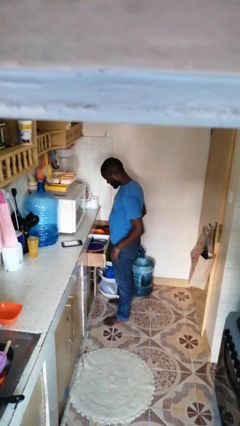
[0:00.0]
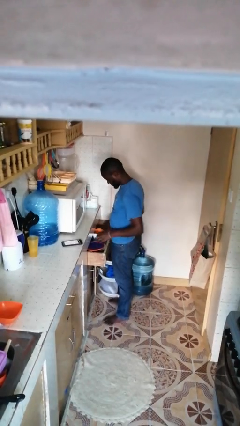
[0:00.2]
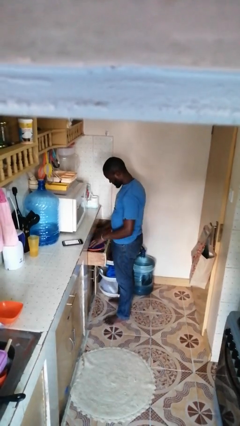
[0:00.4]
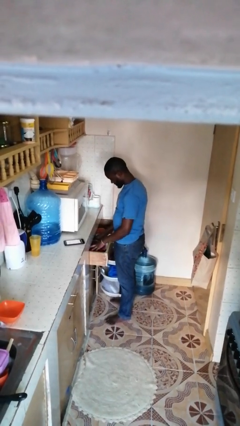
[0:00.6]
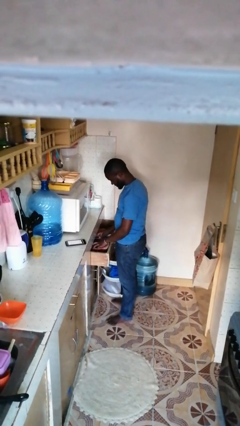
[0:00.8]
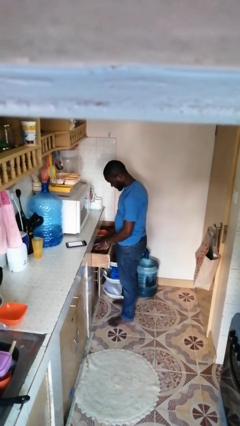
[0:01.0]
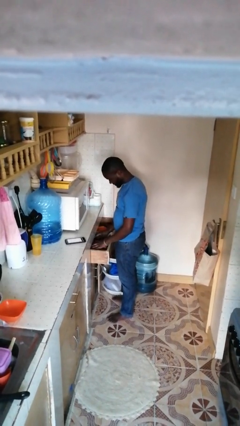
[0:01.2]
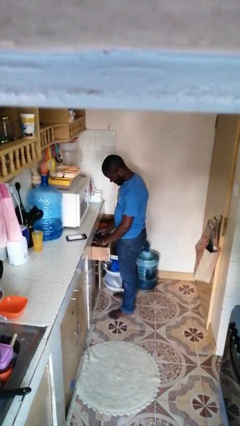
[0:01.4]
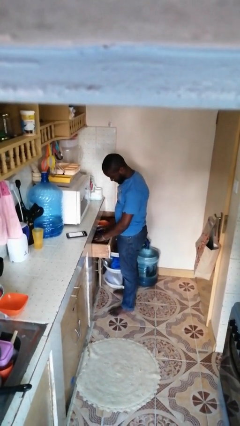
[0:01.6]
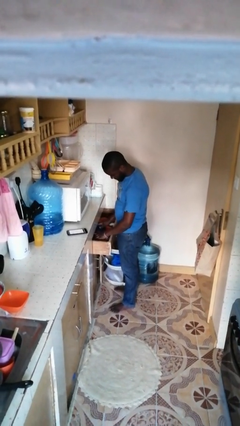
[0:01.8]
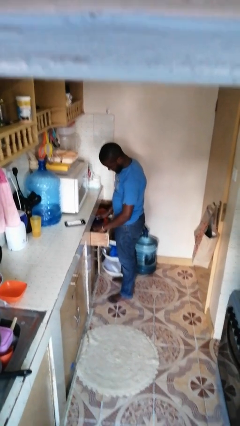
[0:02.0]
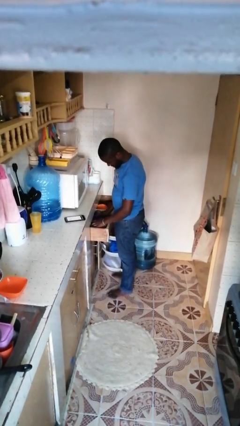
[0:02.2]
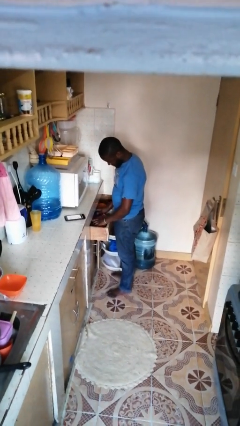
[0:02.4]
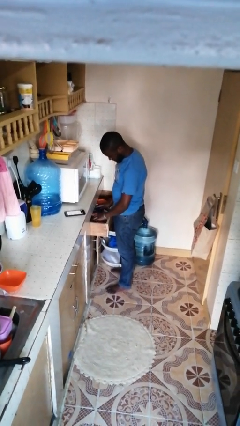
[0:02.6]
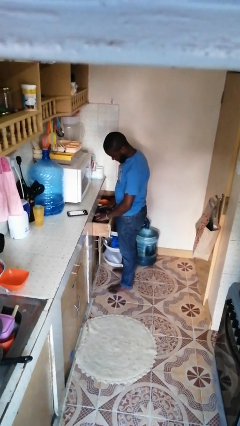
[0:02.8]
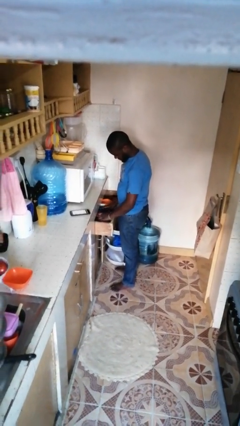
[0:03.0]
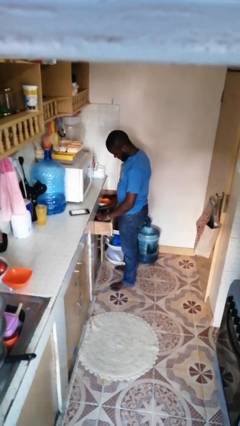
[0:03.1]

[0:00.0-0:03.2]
person searches in kitchen drawer

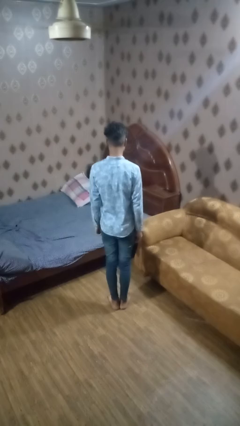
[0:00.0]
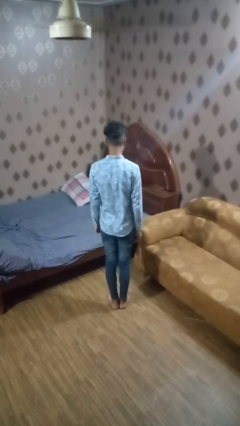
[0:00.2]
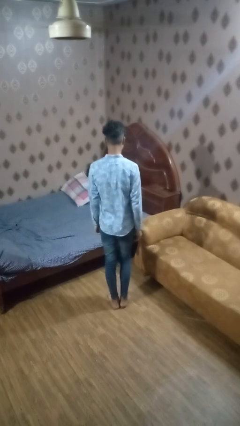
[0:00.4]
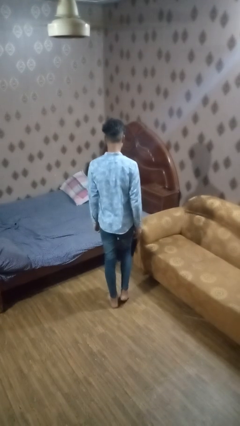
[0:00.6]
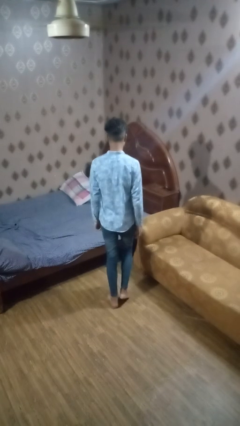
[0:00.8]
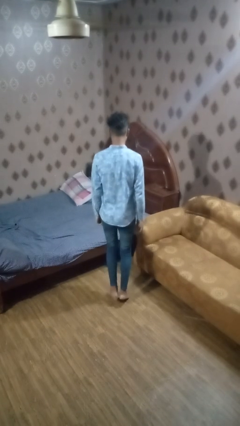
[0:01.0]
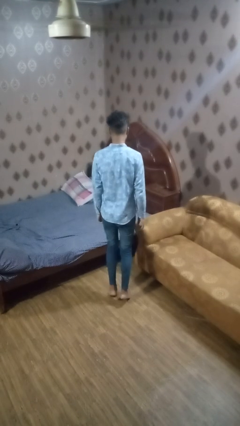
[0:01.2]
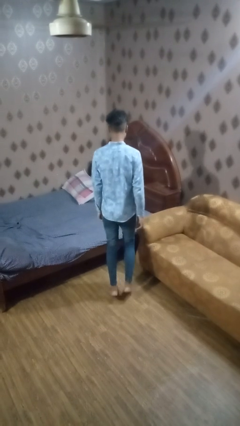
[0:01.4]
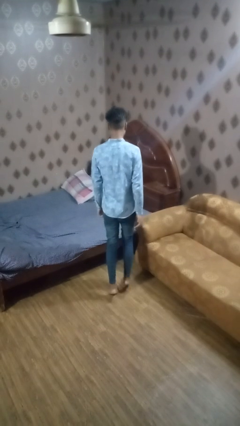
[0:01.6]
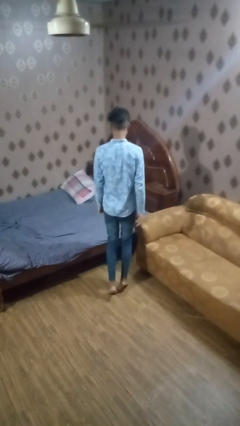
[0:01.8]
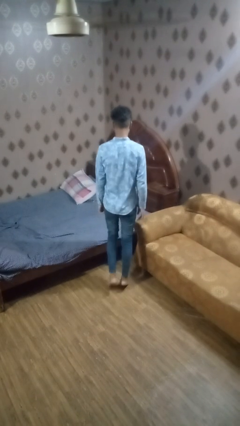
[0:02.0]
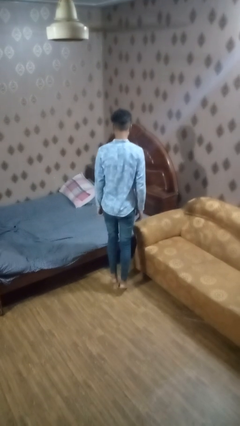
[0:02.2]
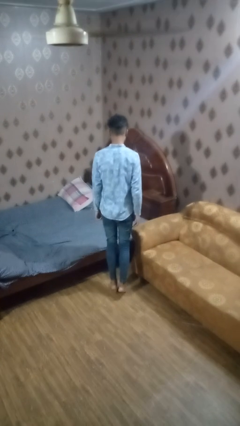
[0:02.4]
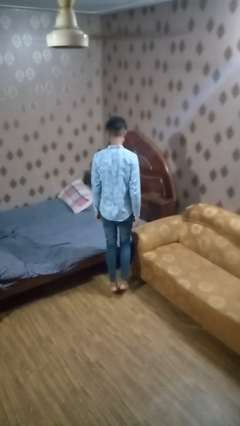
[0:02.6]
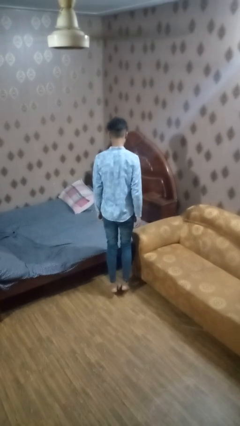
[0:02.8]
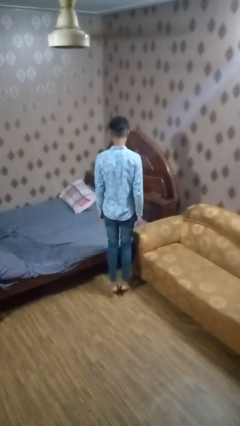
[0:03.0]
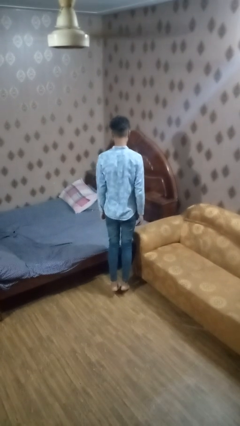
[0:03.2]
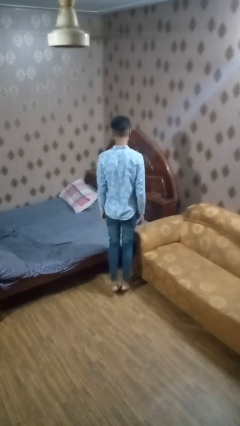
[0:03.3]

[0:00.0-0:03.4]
person walks tiptoe

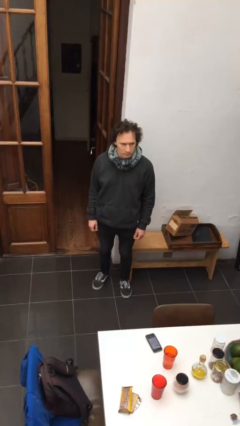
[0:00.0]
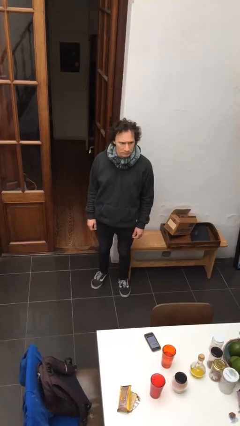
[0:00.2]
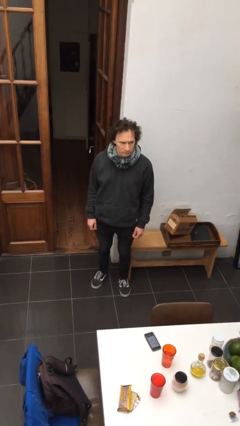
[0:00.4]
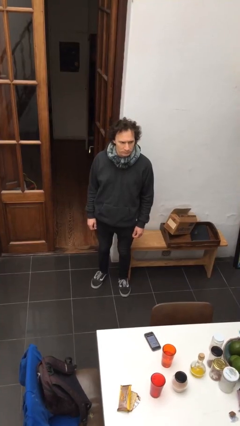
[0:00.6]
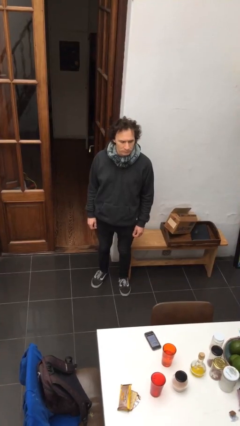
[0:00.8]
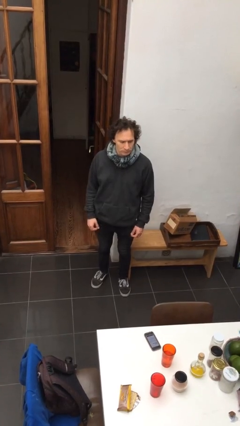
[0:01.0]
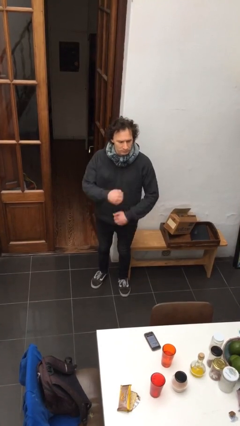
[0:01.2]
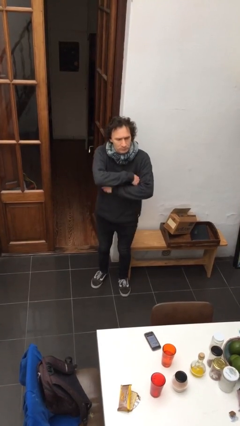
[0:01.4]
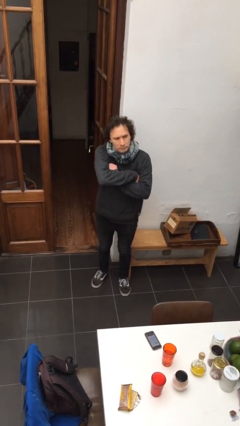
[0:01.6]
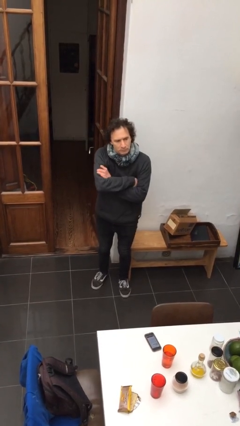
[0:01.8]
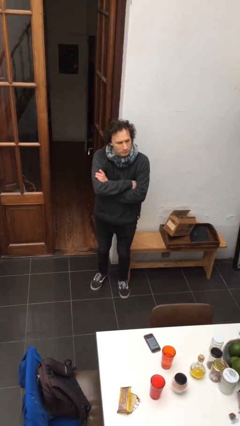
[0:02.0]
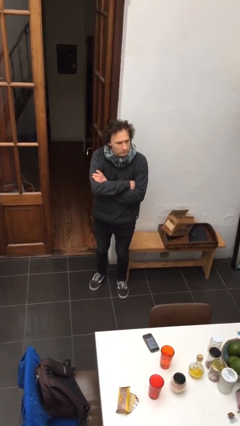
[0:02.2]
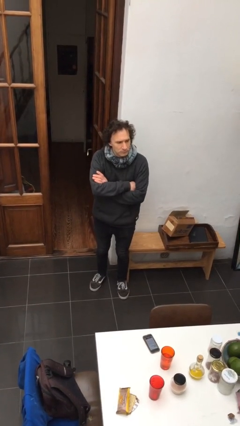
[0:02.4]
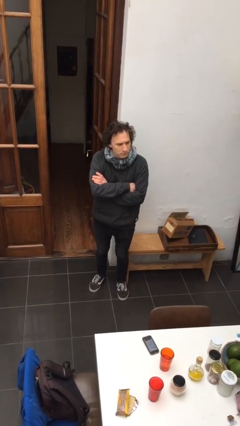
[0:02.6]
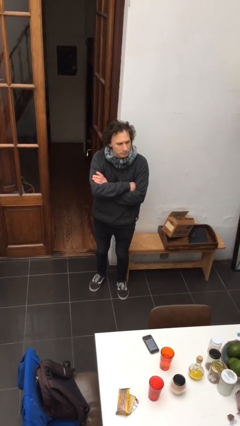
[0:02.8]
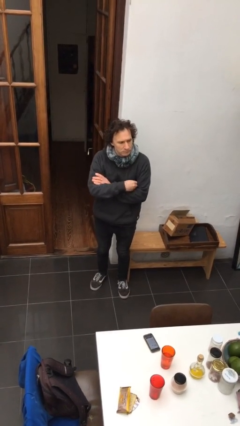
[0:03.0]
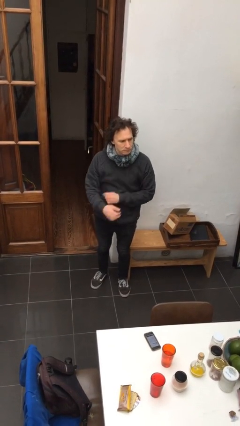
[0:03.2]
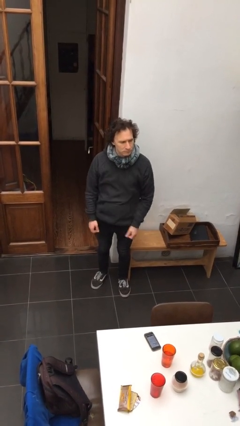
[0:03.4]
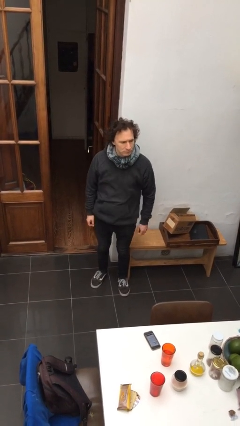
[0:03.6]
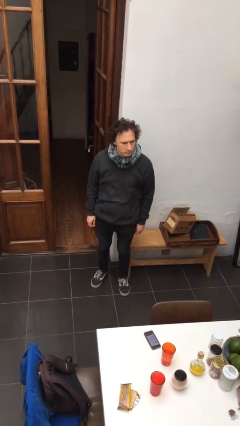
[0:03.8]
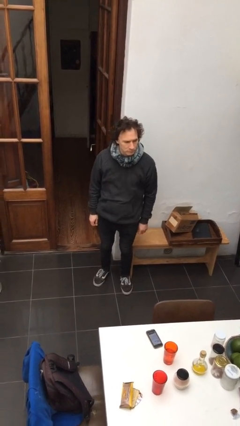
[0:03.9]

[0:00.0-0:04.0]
person crosses arms

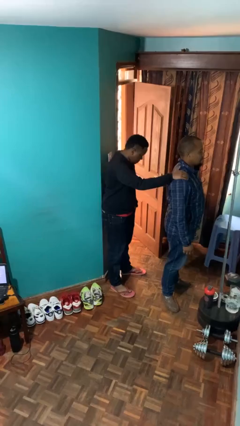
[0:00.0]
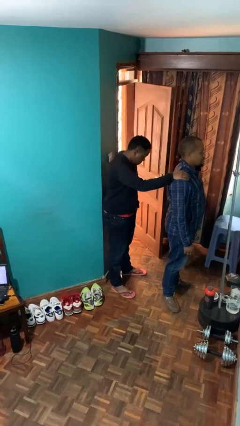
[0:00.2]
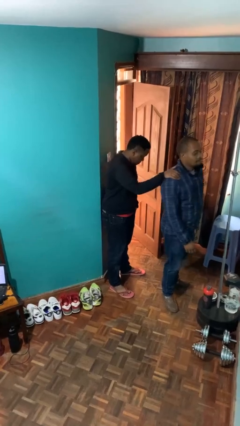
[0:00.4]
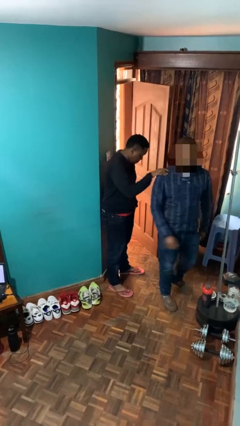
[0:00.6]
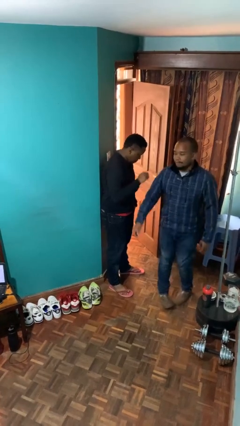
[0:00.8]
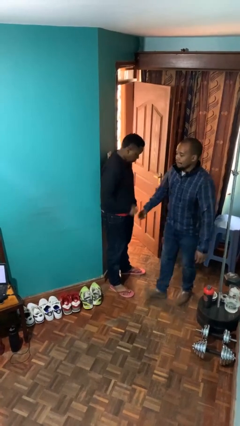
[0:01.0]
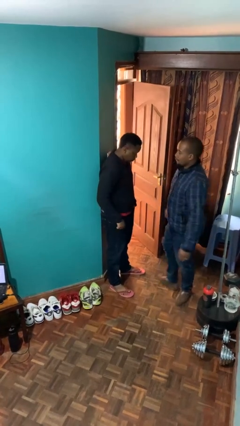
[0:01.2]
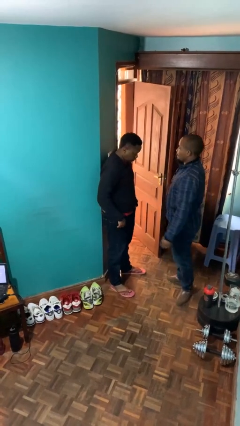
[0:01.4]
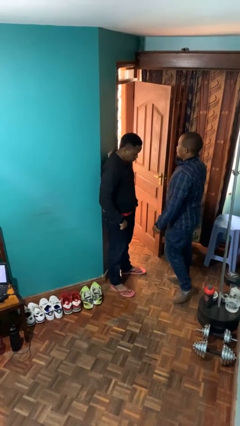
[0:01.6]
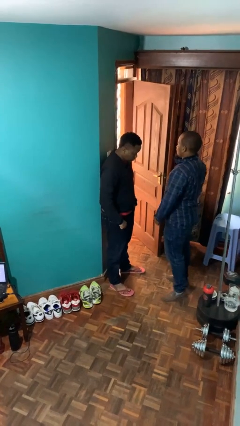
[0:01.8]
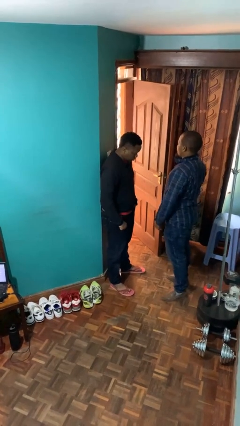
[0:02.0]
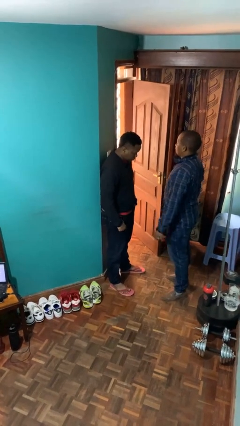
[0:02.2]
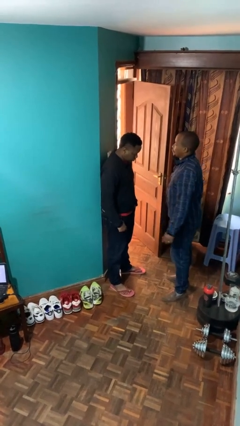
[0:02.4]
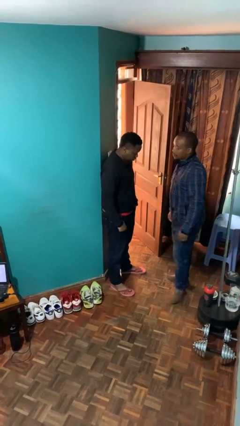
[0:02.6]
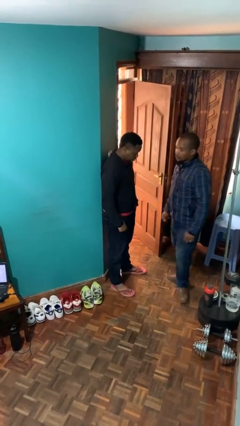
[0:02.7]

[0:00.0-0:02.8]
person spins person around

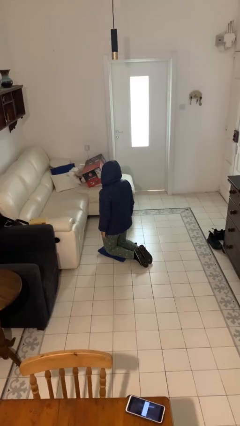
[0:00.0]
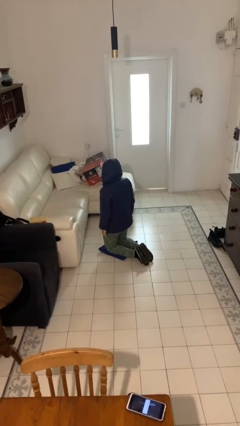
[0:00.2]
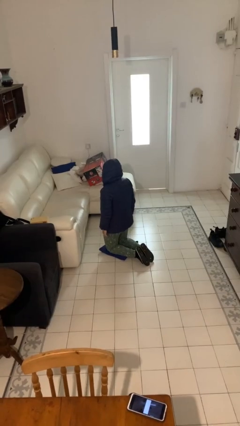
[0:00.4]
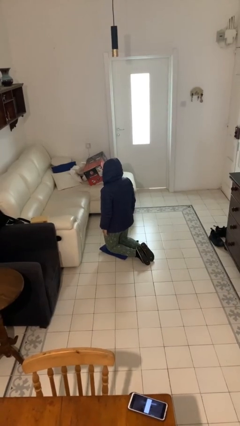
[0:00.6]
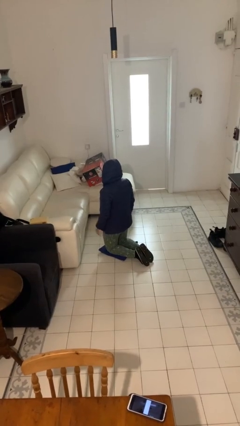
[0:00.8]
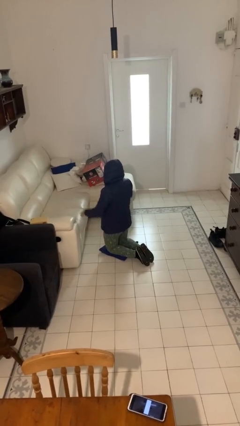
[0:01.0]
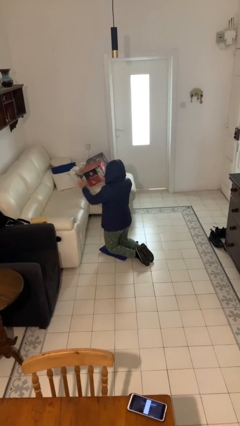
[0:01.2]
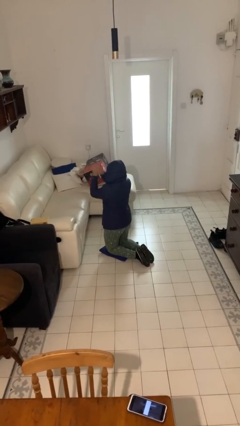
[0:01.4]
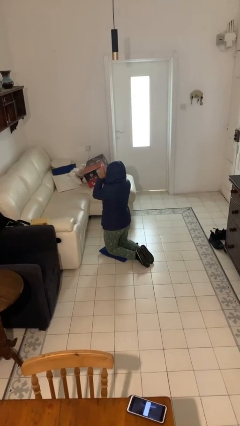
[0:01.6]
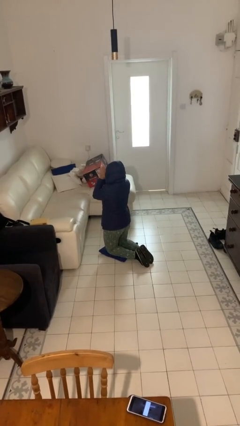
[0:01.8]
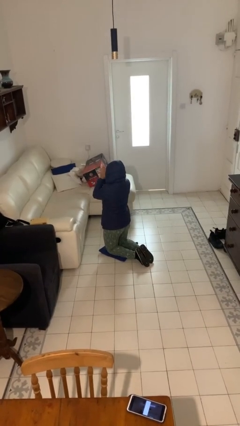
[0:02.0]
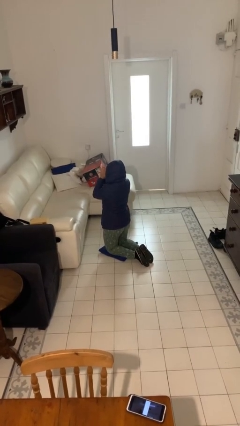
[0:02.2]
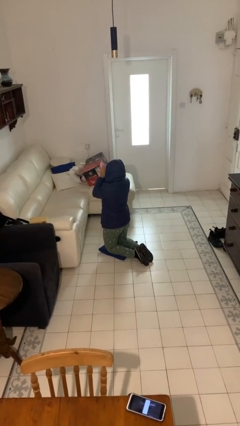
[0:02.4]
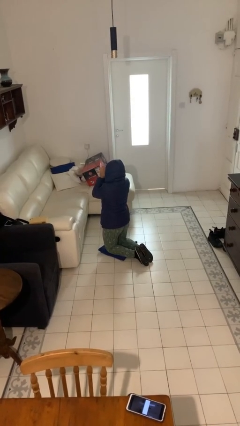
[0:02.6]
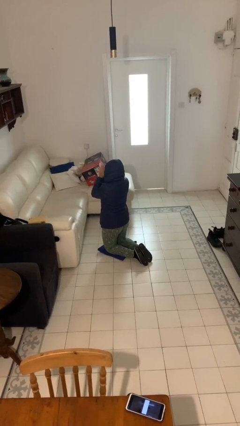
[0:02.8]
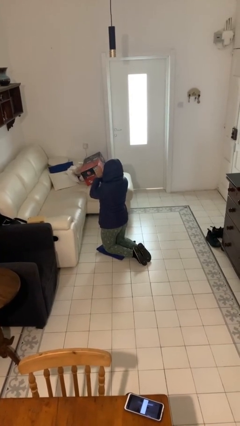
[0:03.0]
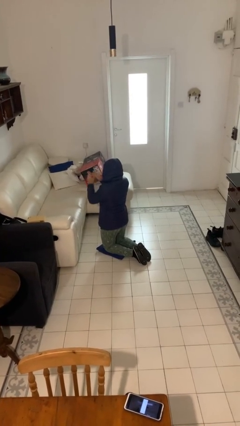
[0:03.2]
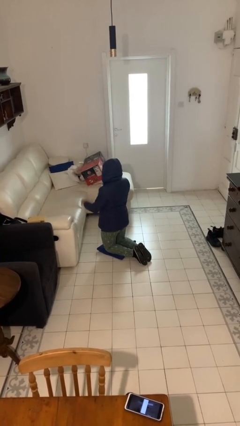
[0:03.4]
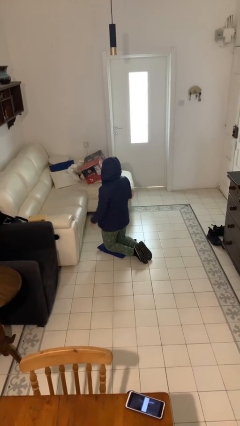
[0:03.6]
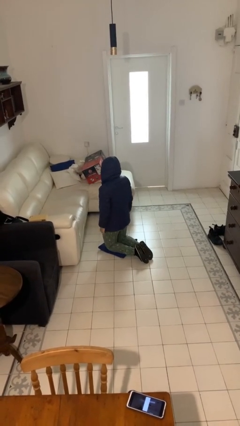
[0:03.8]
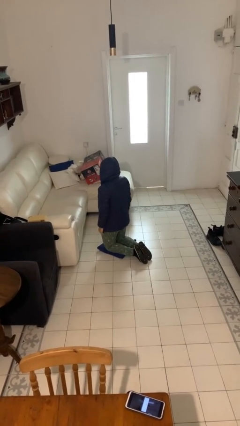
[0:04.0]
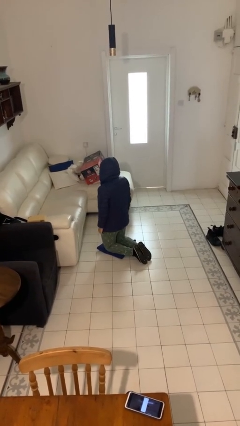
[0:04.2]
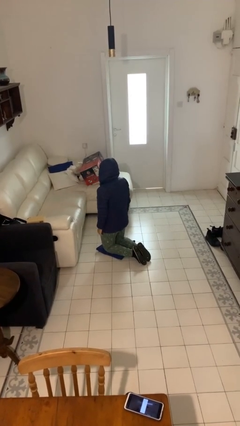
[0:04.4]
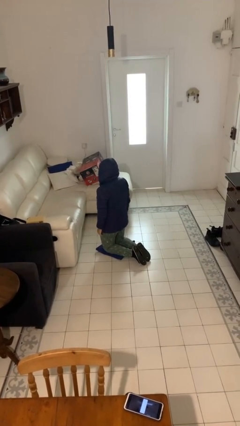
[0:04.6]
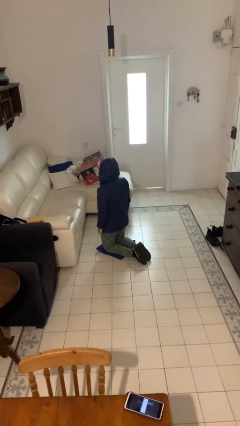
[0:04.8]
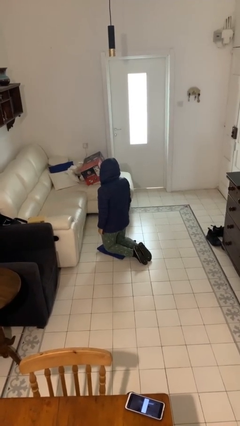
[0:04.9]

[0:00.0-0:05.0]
person prays
